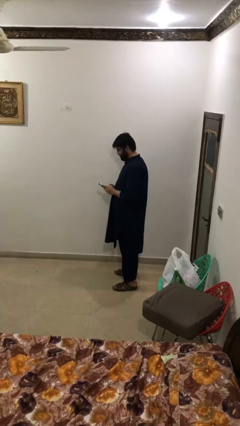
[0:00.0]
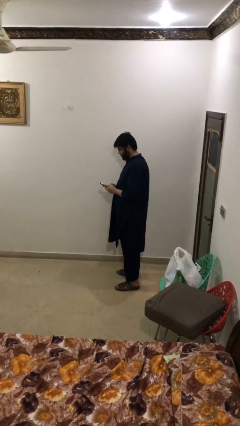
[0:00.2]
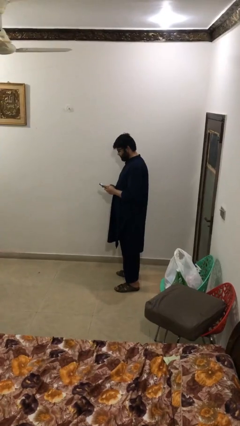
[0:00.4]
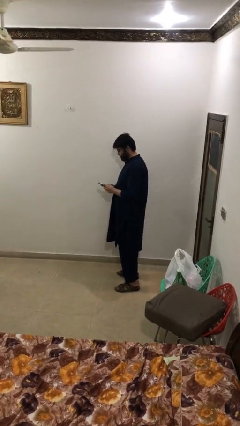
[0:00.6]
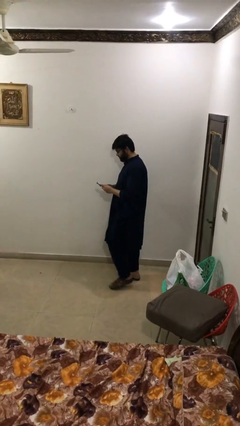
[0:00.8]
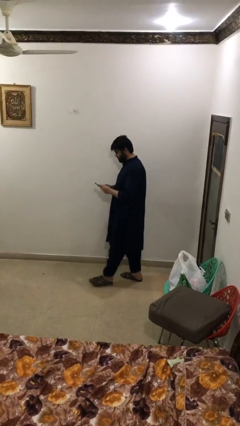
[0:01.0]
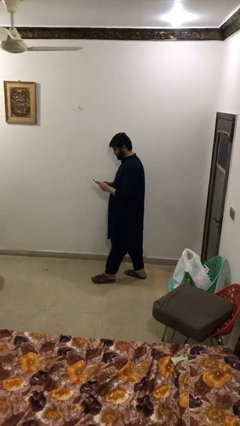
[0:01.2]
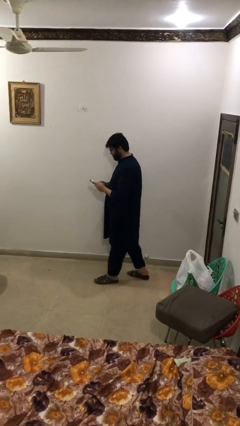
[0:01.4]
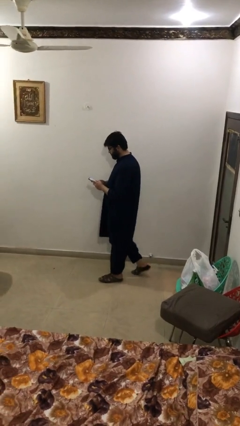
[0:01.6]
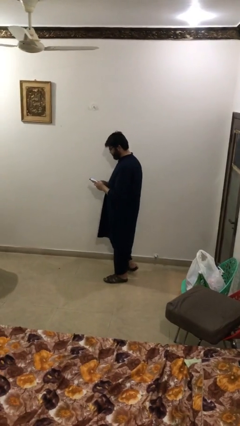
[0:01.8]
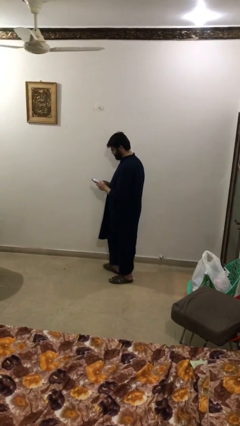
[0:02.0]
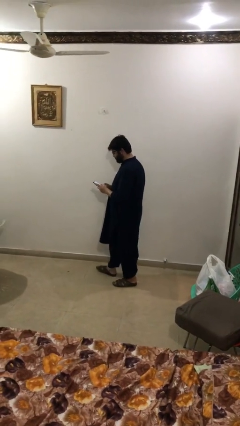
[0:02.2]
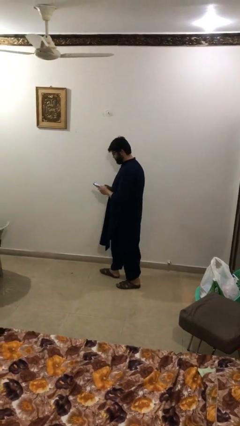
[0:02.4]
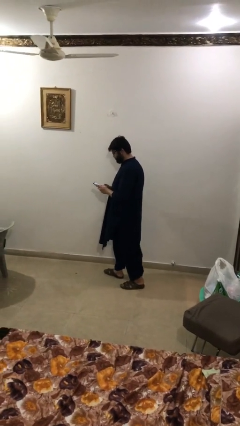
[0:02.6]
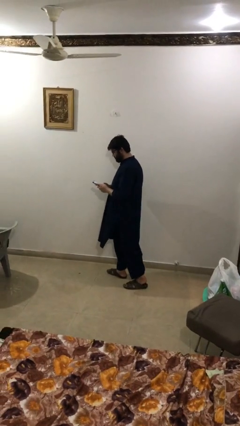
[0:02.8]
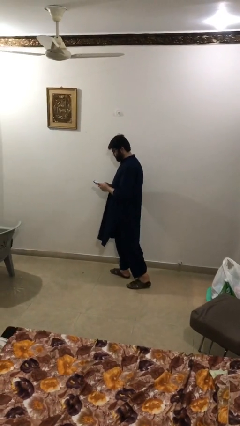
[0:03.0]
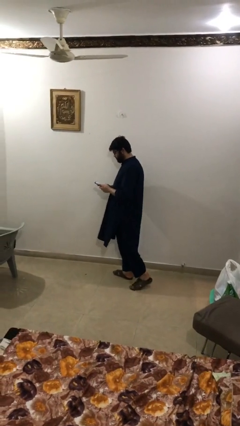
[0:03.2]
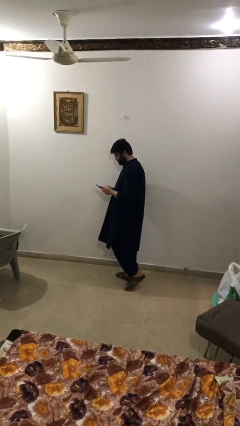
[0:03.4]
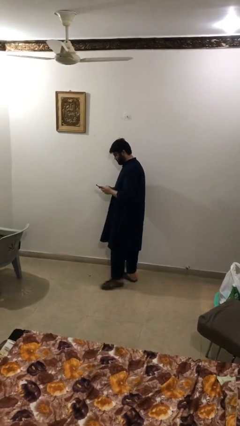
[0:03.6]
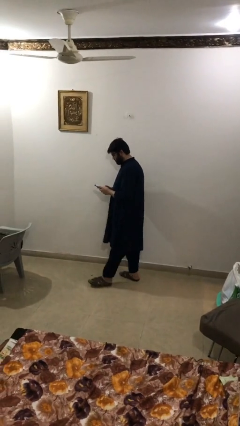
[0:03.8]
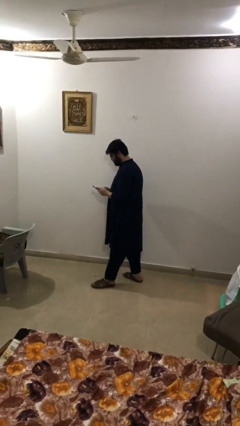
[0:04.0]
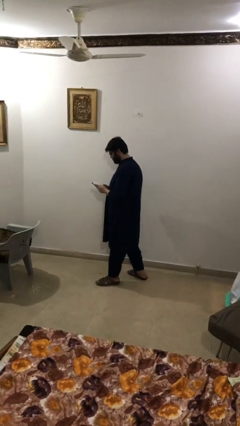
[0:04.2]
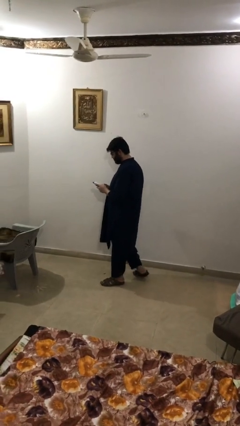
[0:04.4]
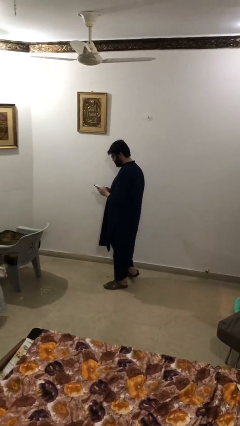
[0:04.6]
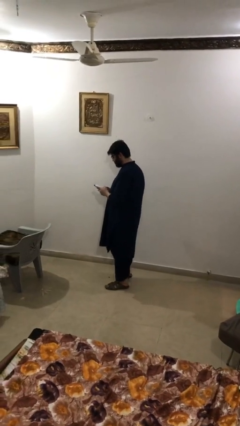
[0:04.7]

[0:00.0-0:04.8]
person texts on phone

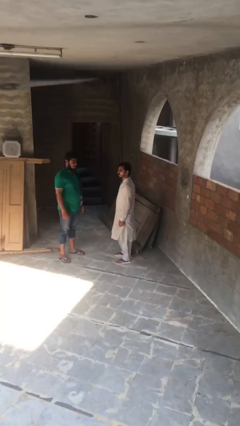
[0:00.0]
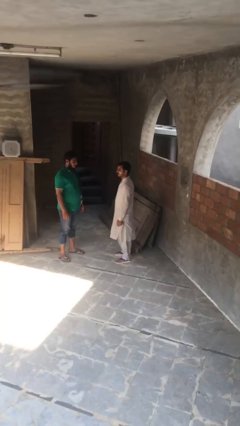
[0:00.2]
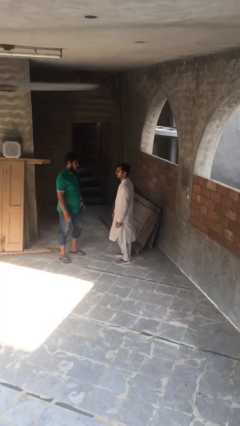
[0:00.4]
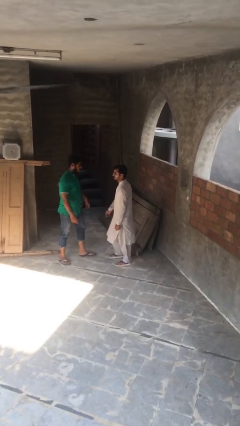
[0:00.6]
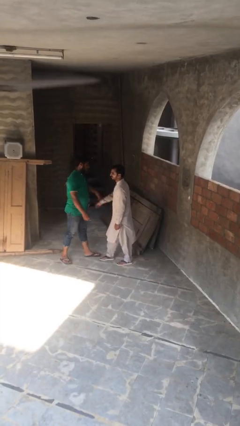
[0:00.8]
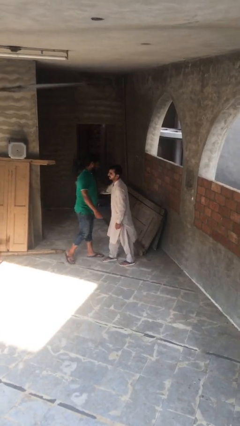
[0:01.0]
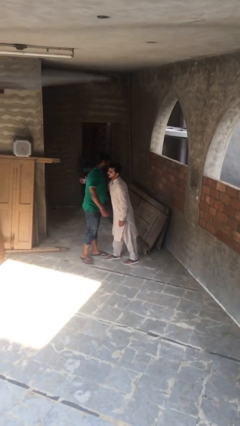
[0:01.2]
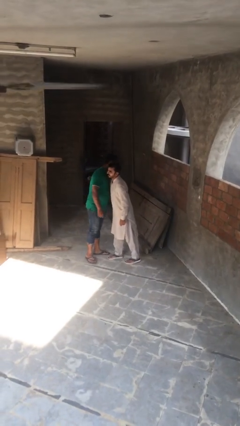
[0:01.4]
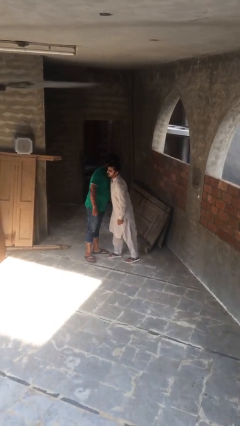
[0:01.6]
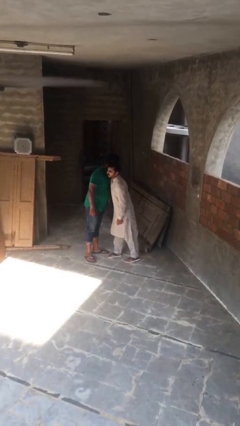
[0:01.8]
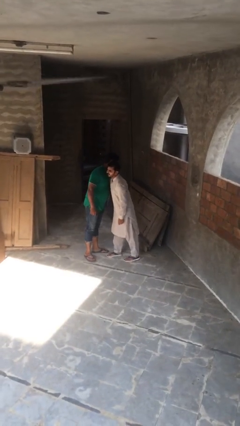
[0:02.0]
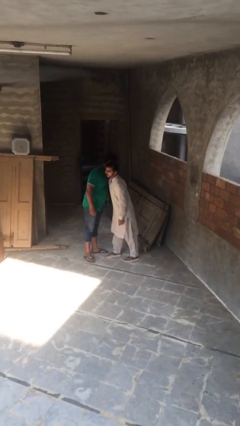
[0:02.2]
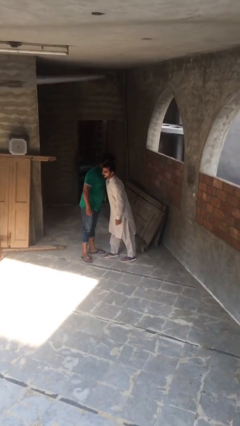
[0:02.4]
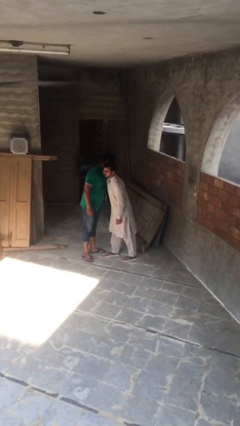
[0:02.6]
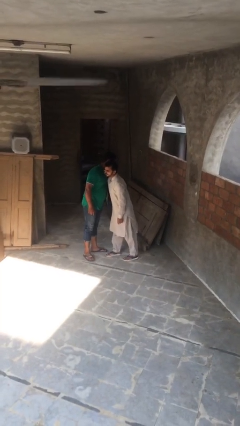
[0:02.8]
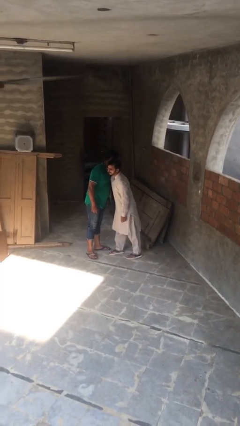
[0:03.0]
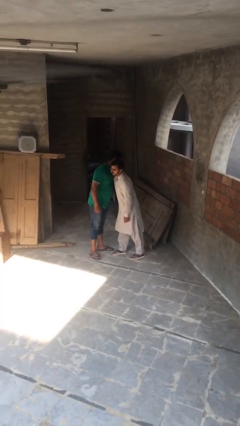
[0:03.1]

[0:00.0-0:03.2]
person embraces person

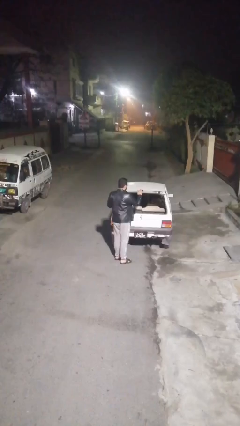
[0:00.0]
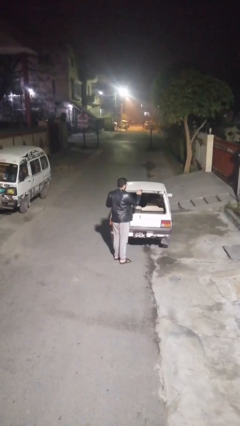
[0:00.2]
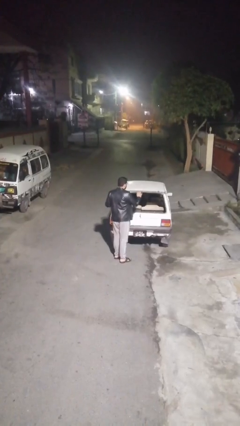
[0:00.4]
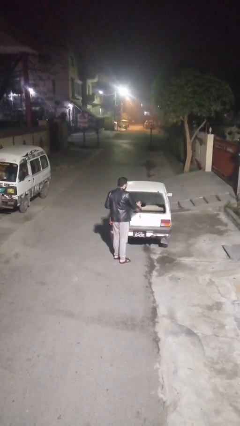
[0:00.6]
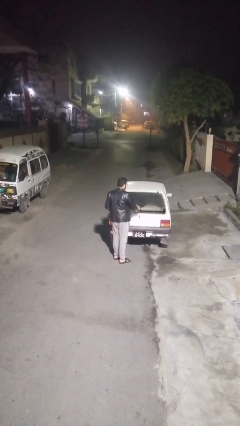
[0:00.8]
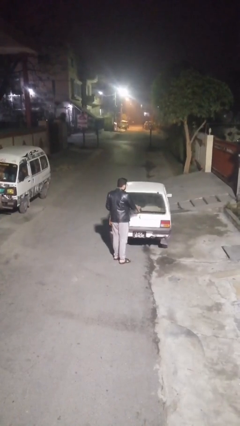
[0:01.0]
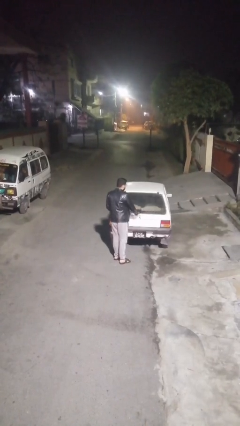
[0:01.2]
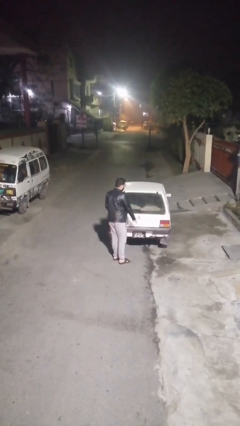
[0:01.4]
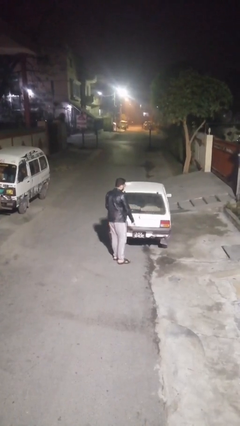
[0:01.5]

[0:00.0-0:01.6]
person closes car trunk

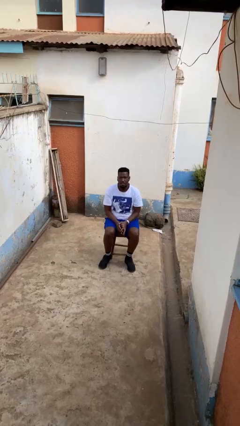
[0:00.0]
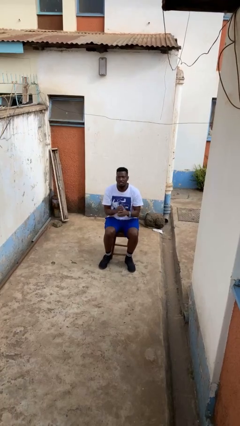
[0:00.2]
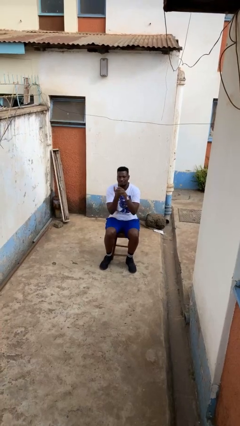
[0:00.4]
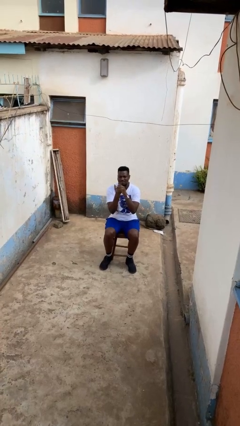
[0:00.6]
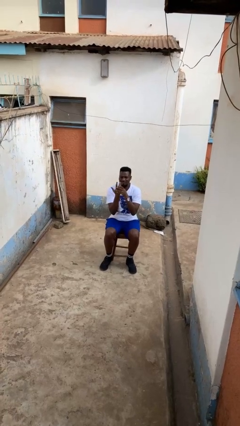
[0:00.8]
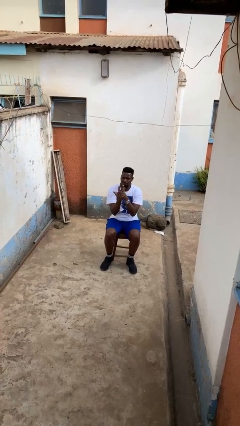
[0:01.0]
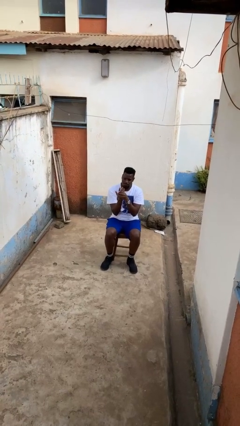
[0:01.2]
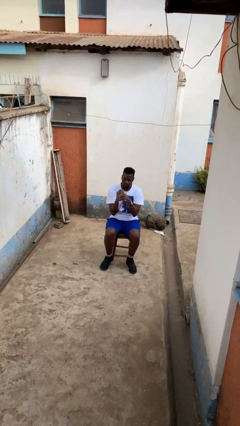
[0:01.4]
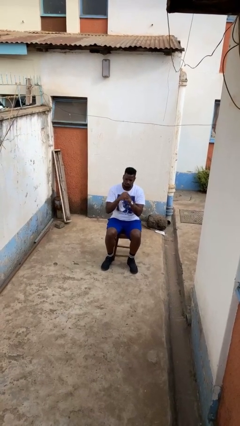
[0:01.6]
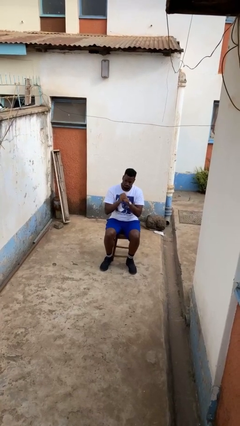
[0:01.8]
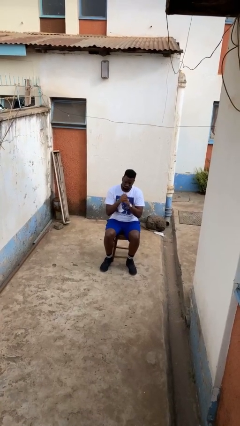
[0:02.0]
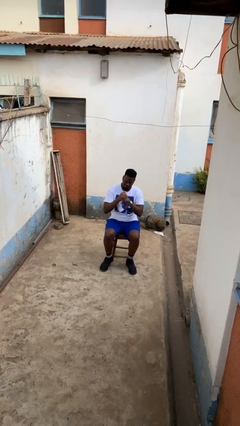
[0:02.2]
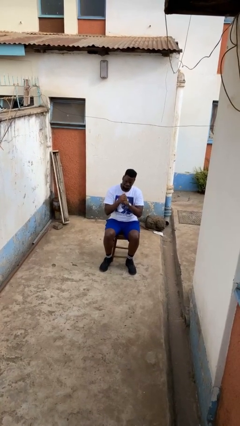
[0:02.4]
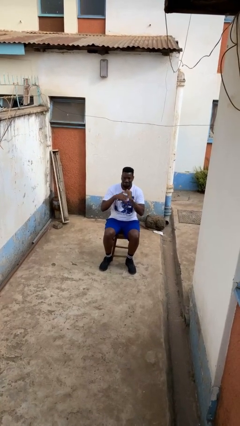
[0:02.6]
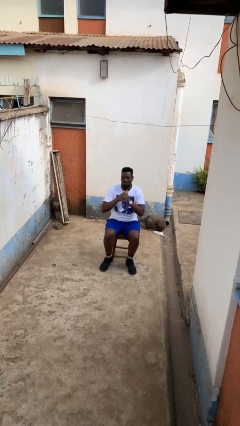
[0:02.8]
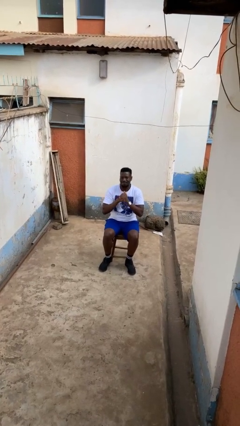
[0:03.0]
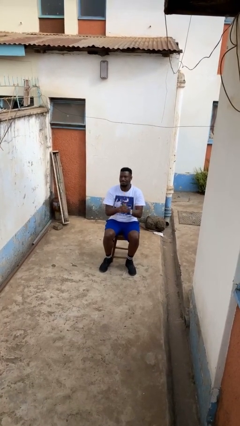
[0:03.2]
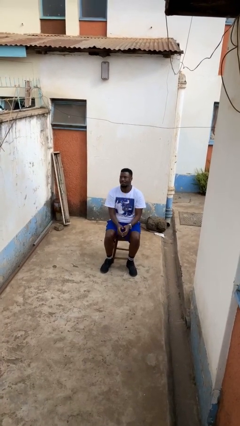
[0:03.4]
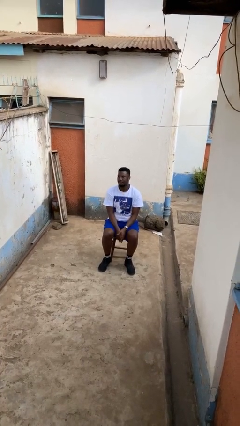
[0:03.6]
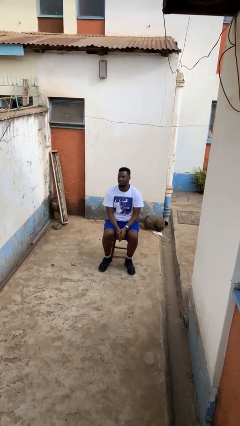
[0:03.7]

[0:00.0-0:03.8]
person cracks knuckles

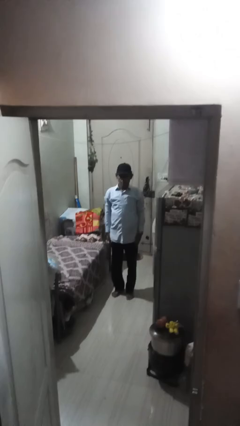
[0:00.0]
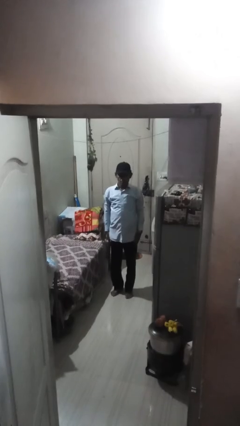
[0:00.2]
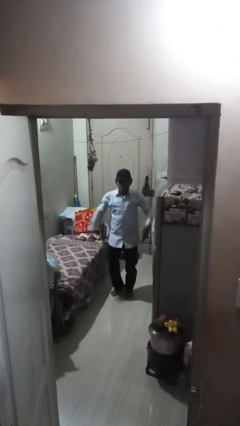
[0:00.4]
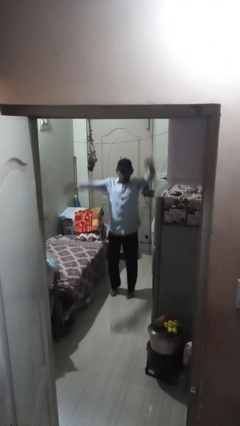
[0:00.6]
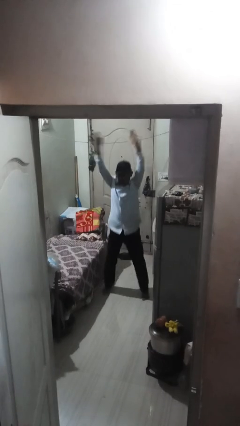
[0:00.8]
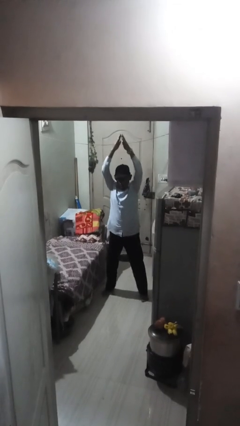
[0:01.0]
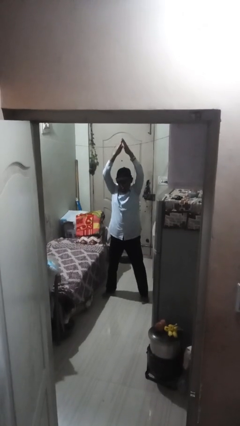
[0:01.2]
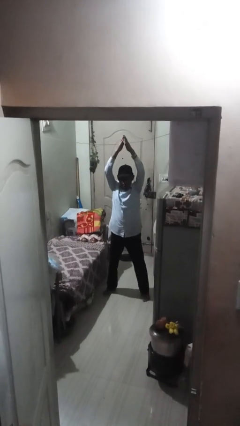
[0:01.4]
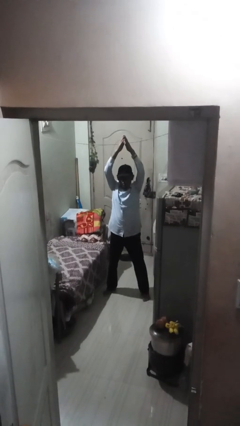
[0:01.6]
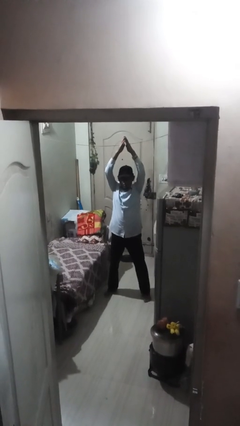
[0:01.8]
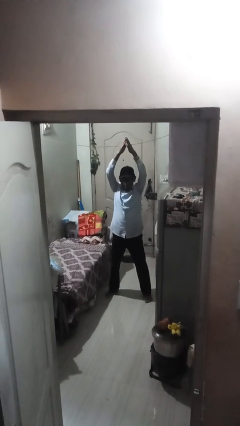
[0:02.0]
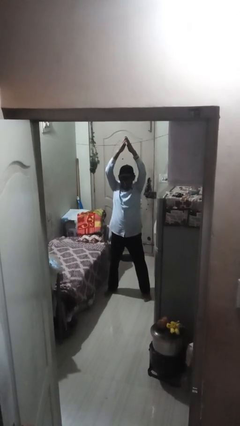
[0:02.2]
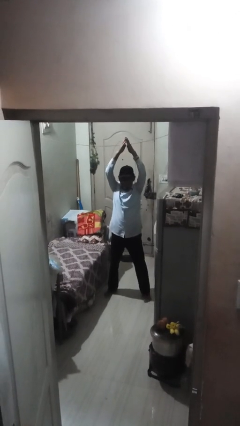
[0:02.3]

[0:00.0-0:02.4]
person exercises with jumping jacks

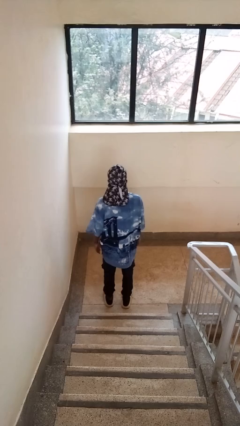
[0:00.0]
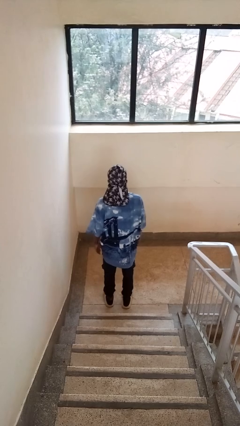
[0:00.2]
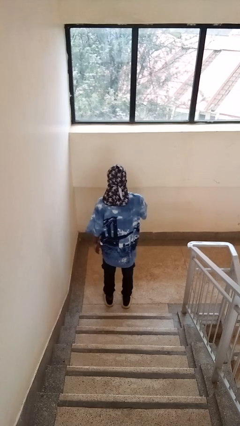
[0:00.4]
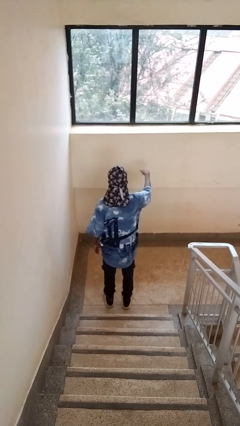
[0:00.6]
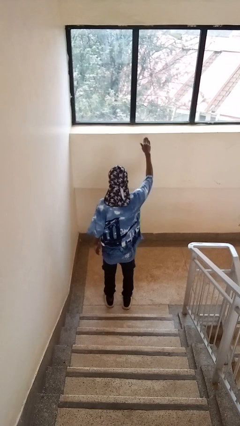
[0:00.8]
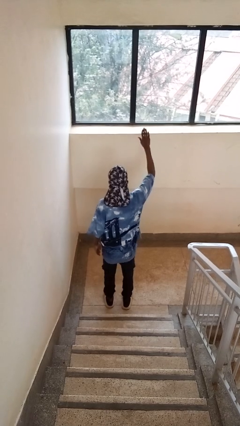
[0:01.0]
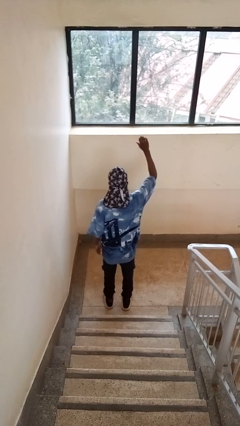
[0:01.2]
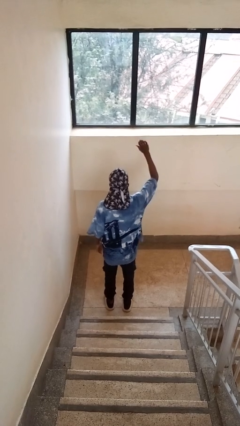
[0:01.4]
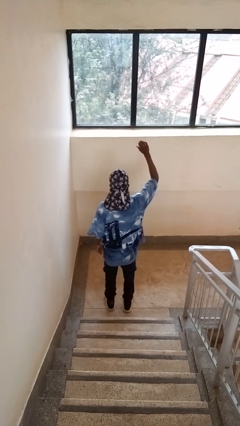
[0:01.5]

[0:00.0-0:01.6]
person gestures swipe up
